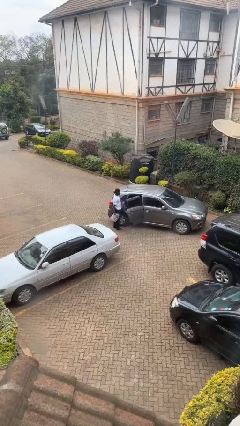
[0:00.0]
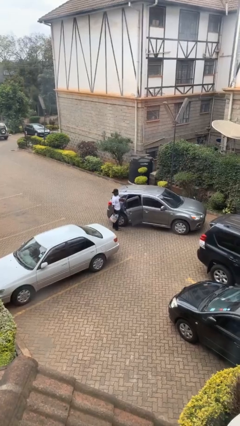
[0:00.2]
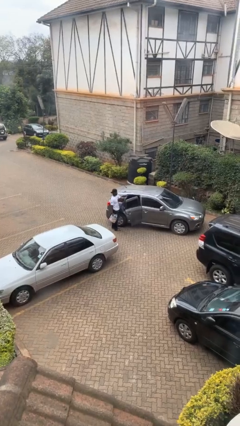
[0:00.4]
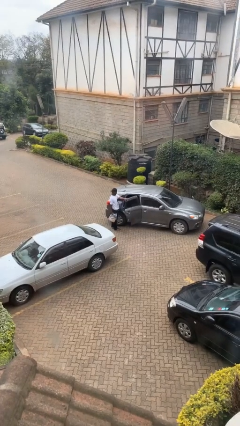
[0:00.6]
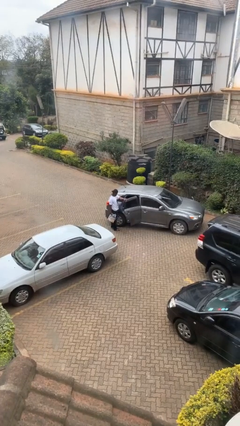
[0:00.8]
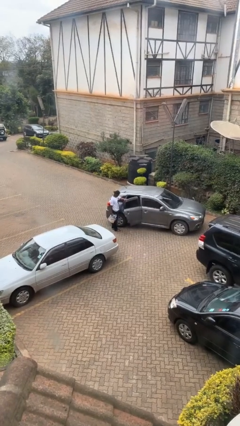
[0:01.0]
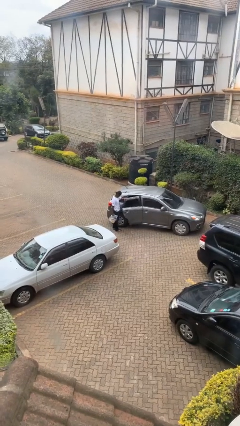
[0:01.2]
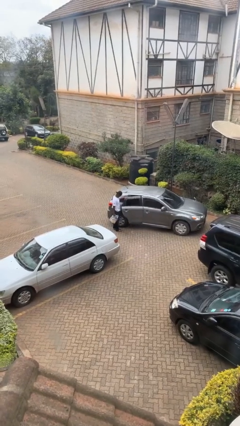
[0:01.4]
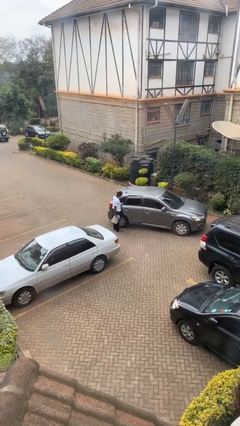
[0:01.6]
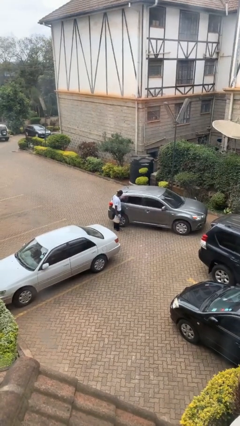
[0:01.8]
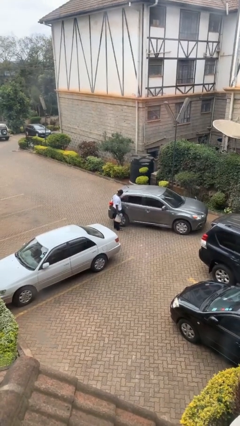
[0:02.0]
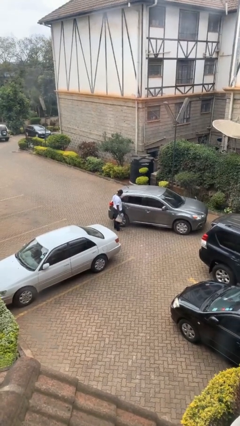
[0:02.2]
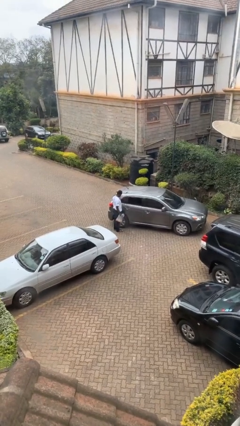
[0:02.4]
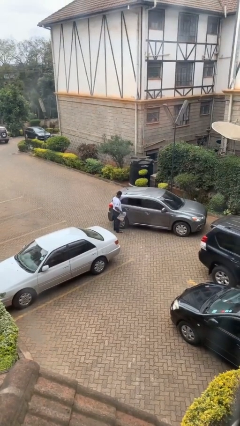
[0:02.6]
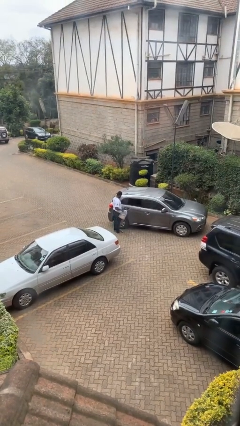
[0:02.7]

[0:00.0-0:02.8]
person closes car door

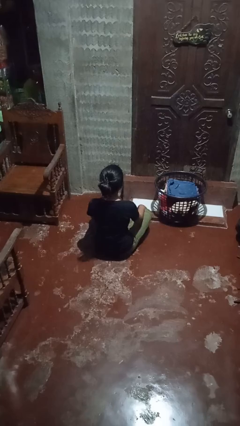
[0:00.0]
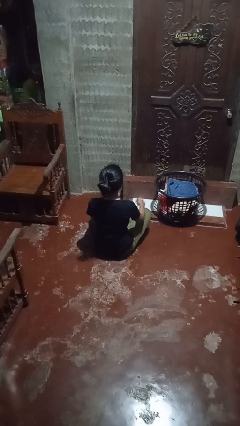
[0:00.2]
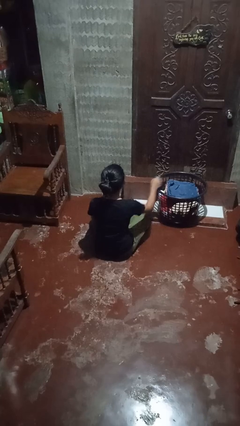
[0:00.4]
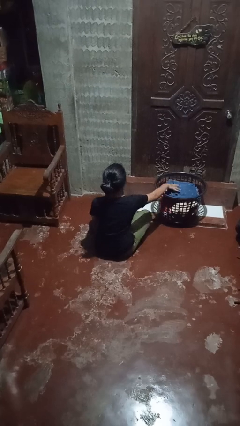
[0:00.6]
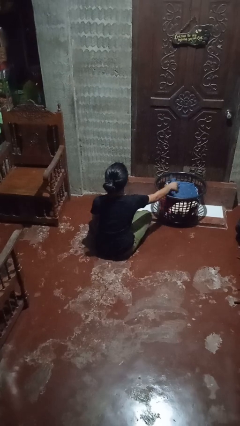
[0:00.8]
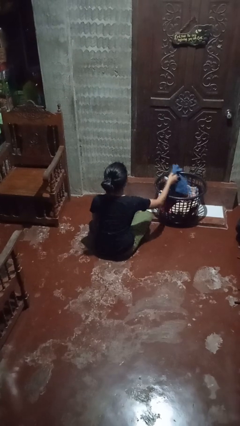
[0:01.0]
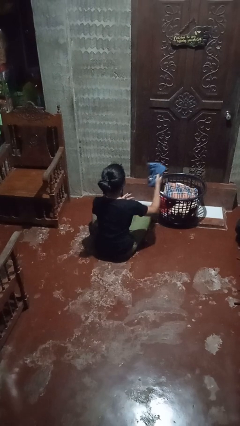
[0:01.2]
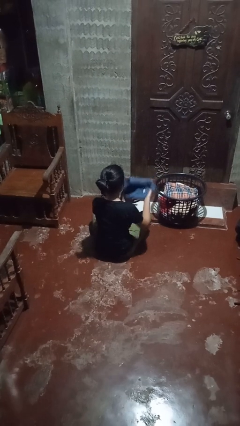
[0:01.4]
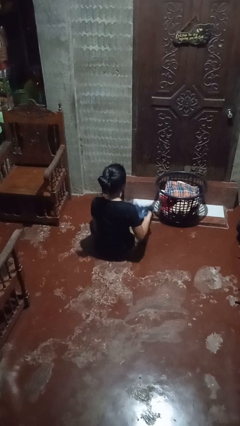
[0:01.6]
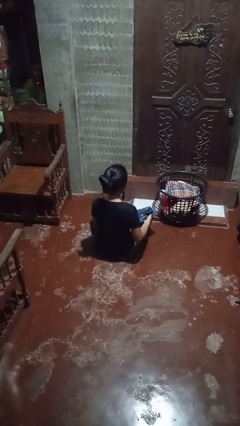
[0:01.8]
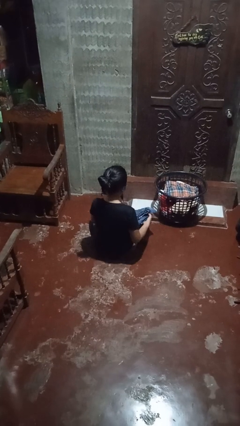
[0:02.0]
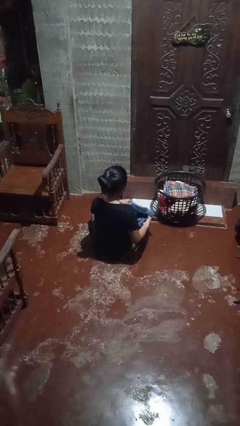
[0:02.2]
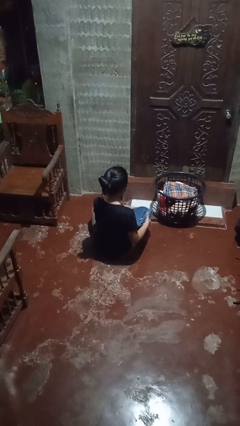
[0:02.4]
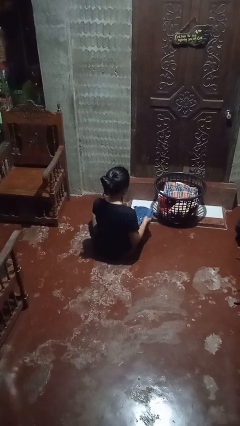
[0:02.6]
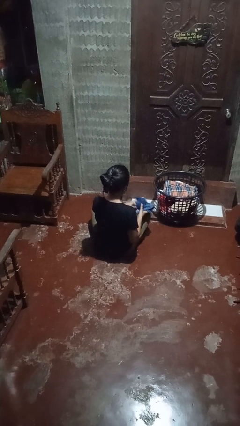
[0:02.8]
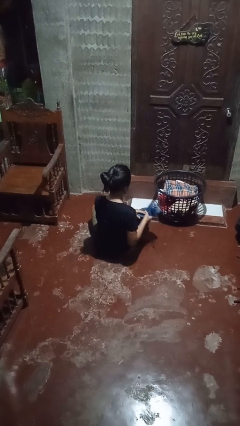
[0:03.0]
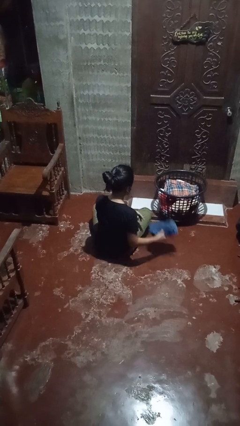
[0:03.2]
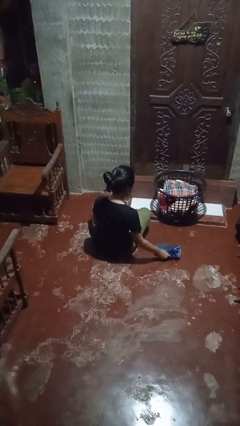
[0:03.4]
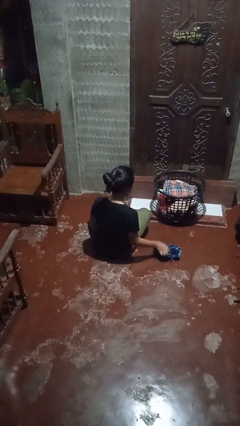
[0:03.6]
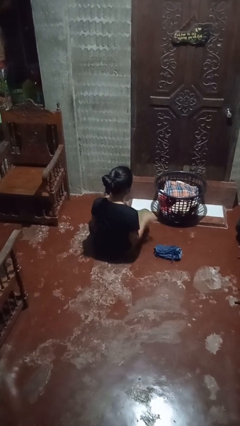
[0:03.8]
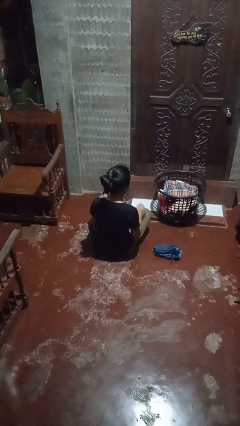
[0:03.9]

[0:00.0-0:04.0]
person folds pants

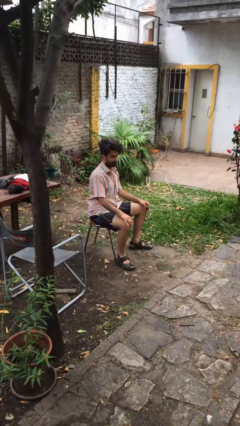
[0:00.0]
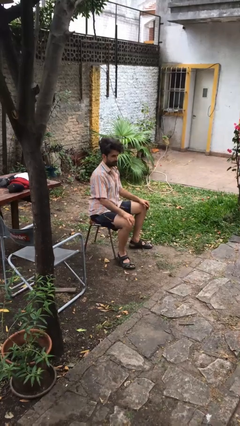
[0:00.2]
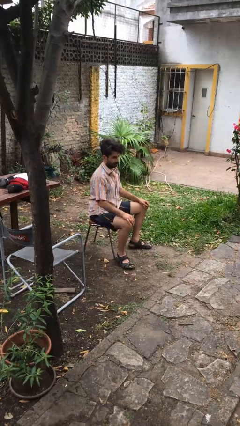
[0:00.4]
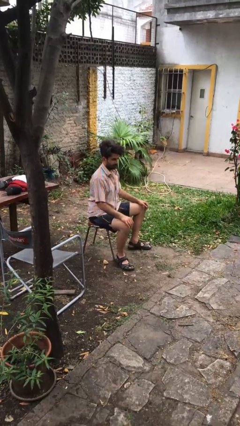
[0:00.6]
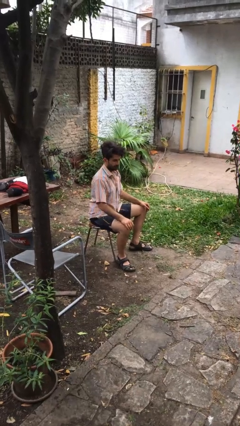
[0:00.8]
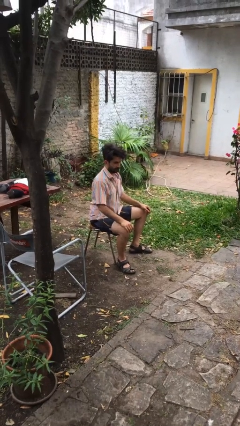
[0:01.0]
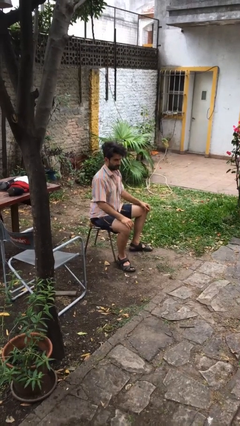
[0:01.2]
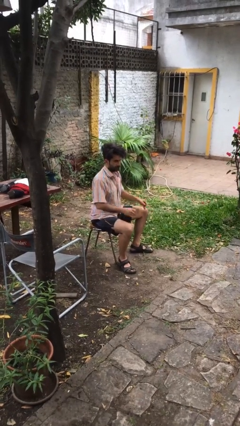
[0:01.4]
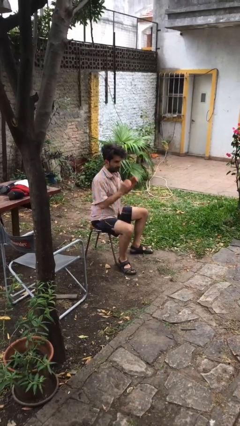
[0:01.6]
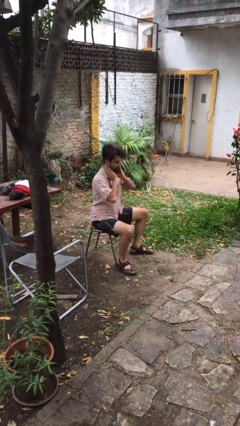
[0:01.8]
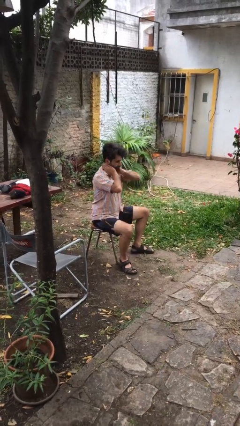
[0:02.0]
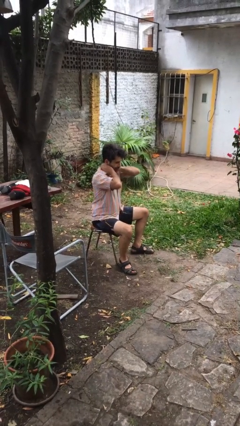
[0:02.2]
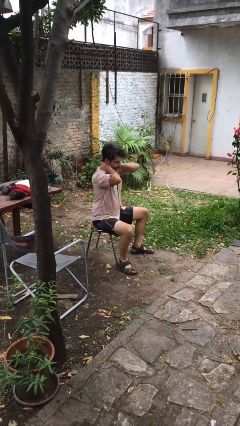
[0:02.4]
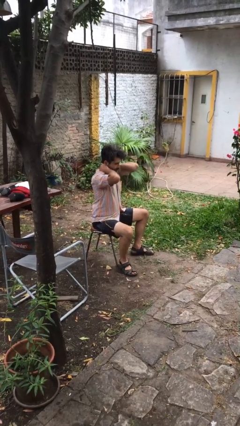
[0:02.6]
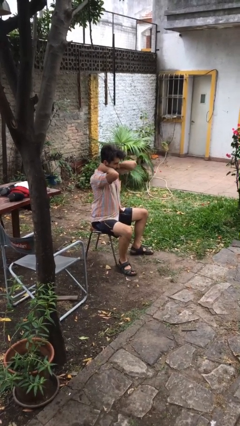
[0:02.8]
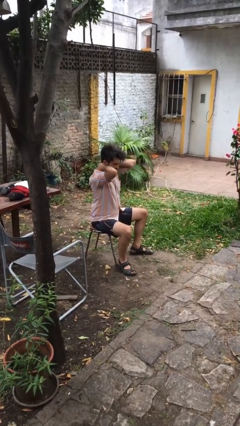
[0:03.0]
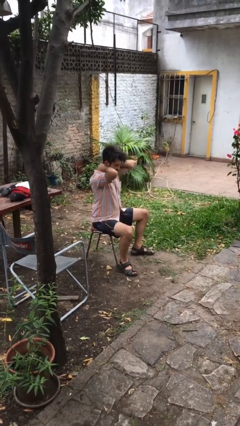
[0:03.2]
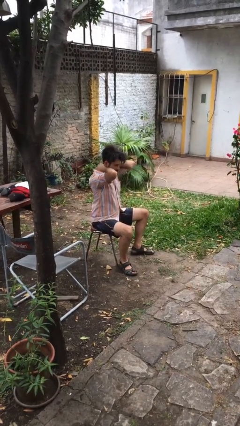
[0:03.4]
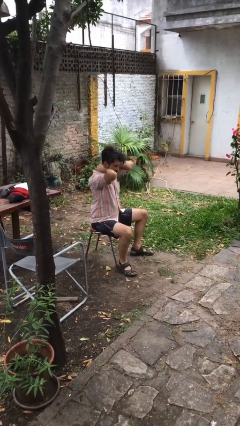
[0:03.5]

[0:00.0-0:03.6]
person rubs neck

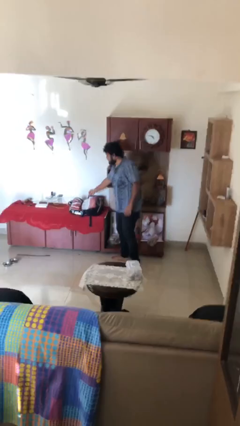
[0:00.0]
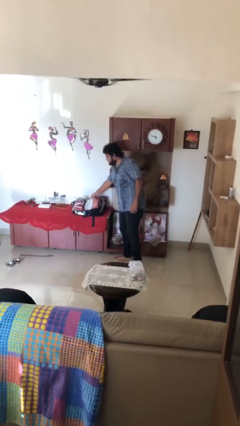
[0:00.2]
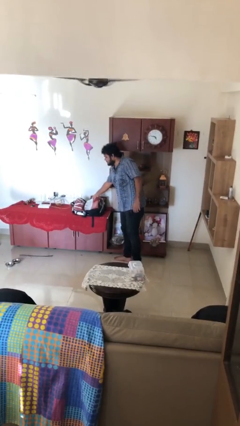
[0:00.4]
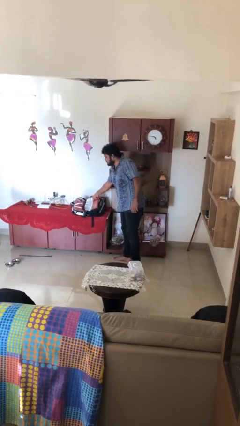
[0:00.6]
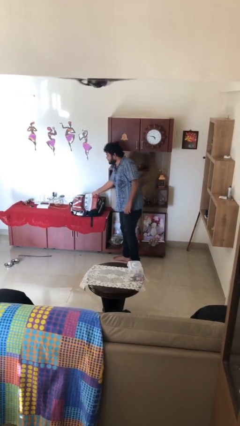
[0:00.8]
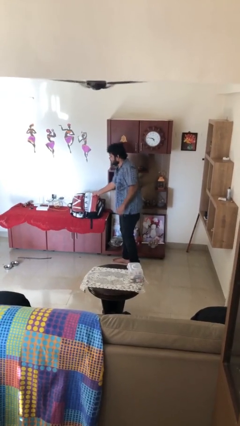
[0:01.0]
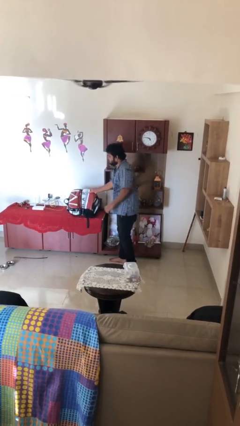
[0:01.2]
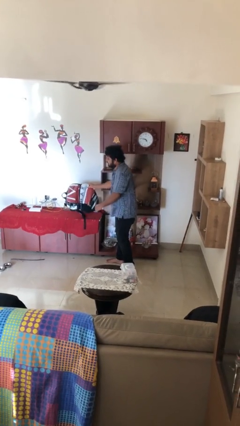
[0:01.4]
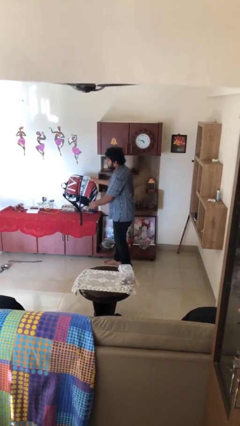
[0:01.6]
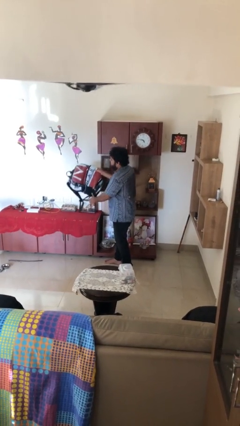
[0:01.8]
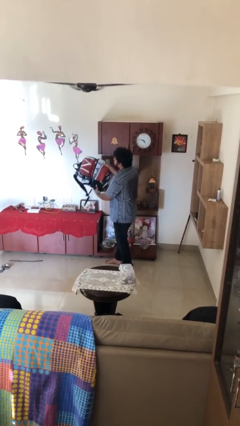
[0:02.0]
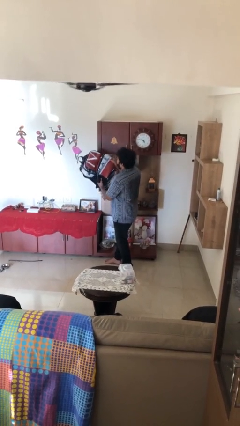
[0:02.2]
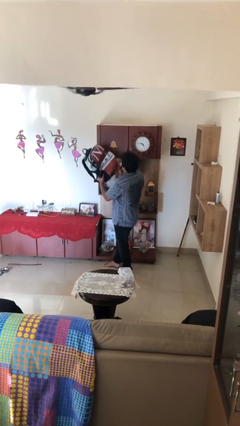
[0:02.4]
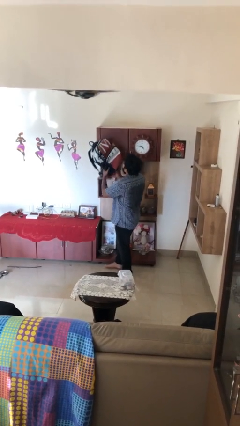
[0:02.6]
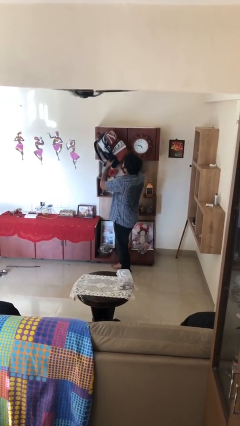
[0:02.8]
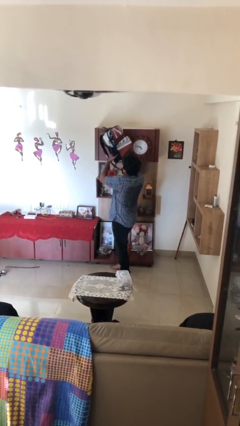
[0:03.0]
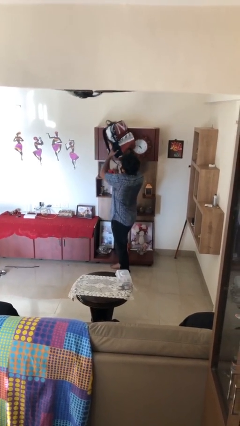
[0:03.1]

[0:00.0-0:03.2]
person picks up object from table

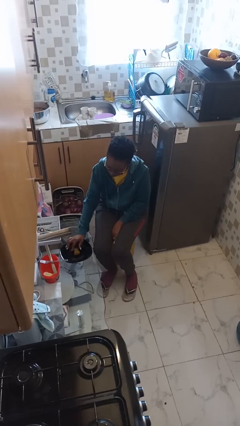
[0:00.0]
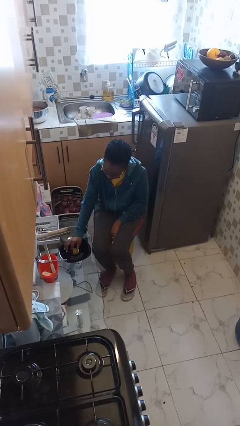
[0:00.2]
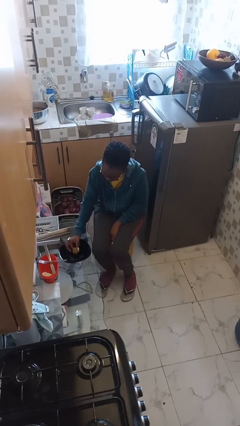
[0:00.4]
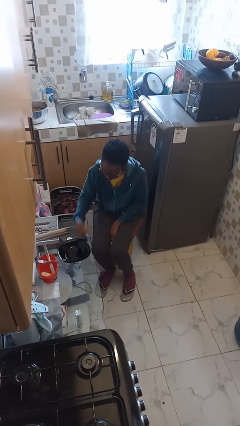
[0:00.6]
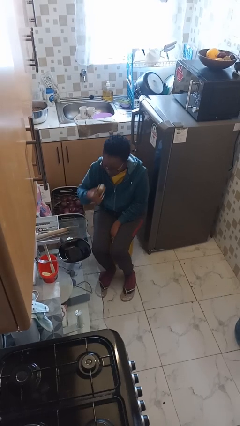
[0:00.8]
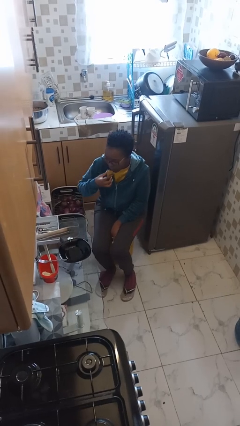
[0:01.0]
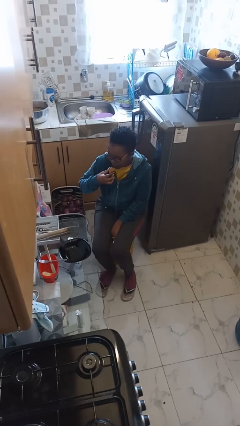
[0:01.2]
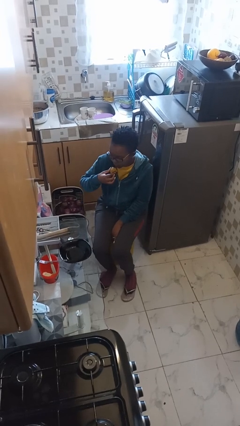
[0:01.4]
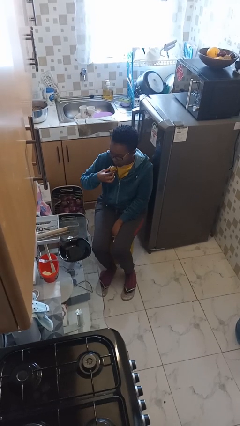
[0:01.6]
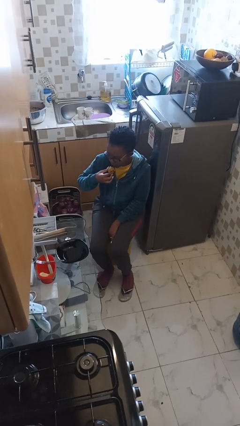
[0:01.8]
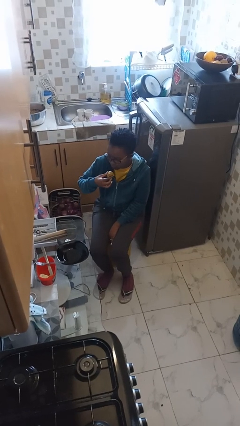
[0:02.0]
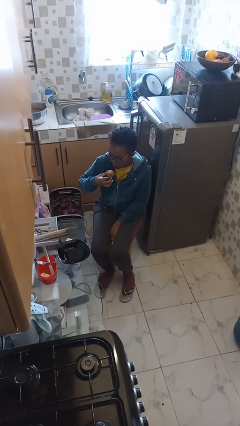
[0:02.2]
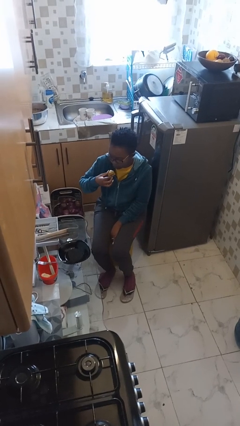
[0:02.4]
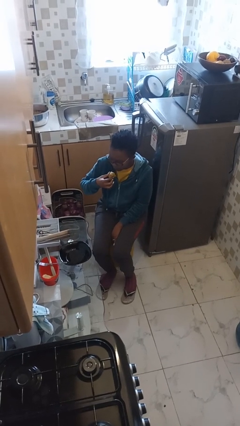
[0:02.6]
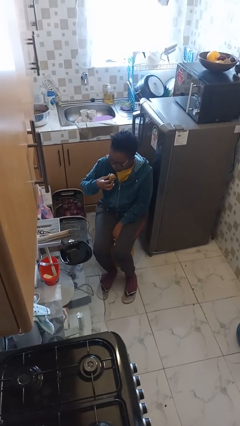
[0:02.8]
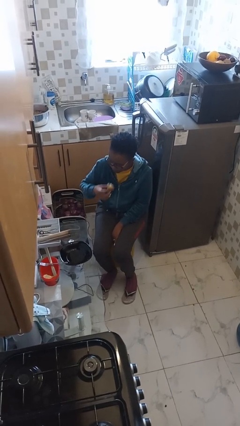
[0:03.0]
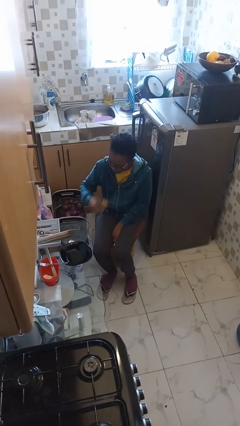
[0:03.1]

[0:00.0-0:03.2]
person eats with hands

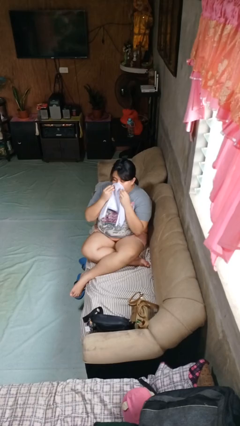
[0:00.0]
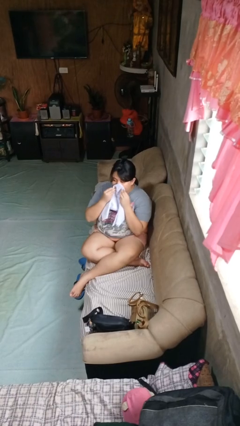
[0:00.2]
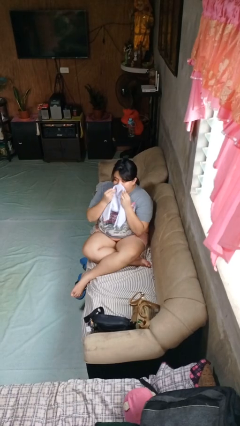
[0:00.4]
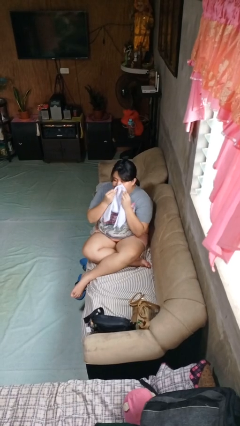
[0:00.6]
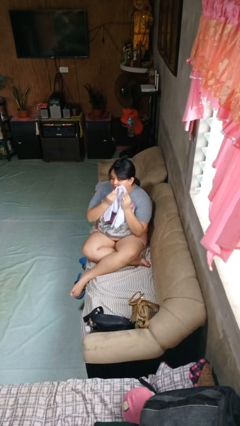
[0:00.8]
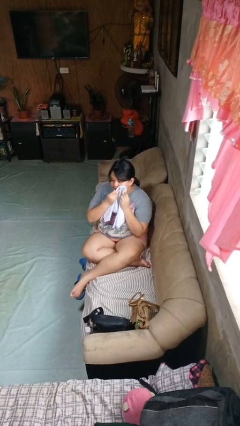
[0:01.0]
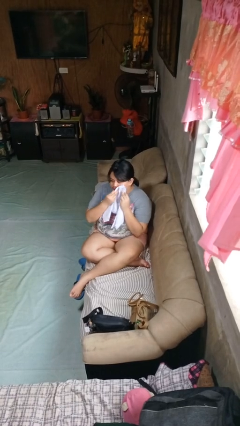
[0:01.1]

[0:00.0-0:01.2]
person wipes mouth with napkin
